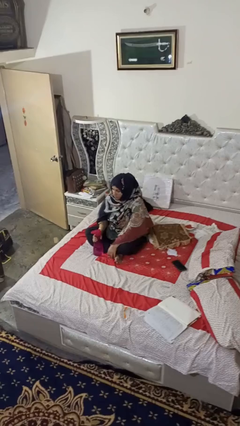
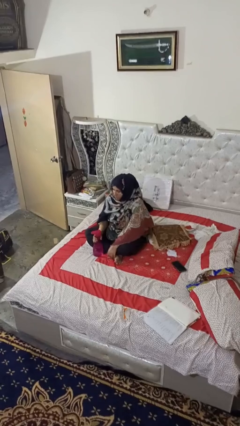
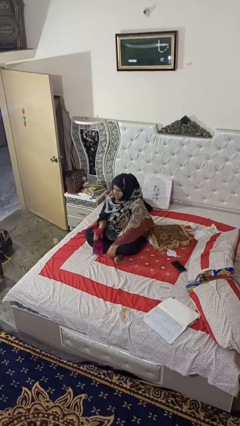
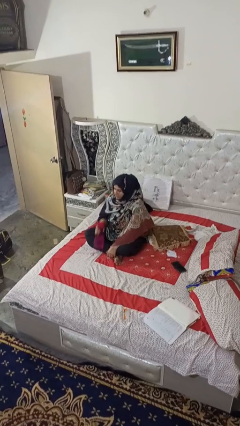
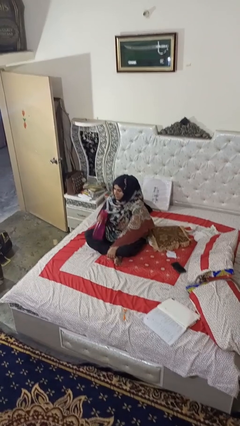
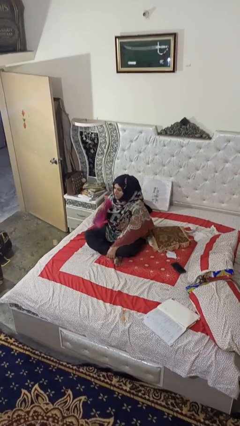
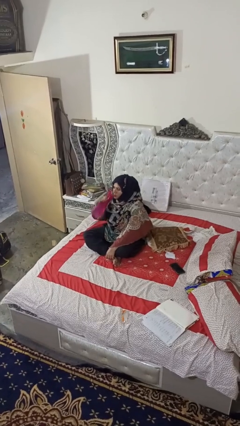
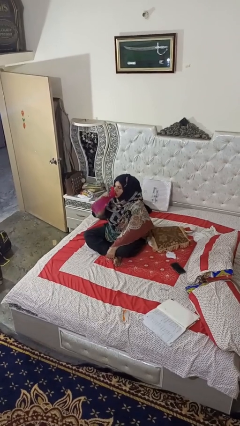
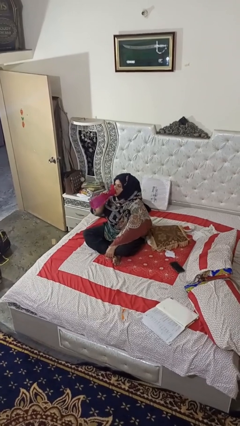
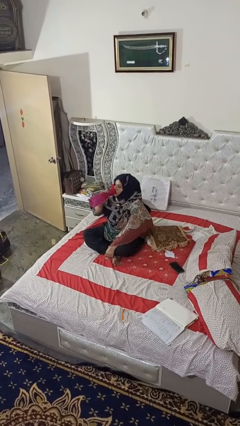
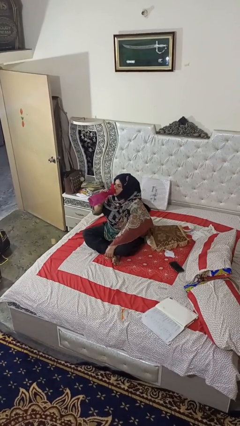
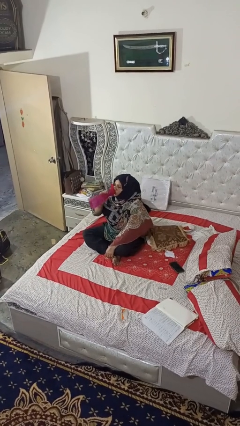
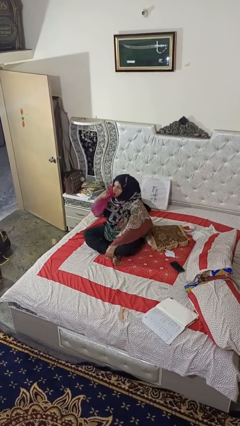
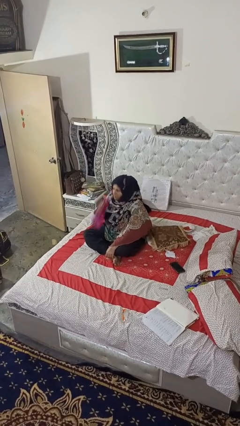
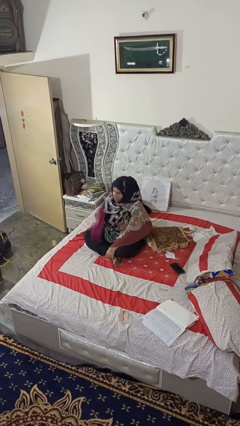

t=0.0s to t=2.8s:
person drinks from bottle

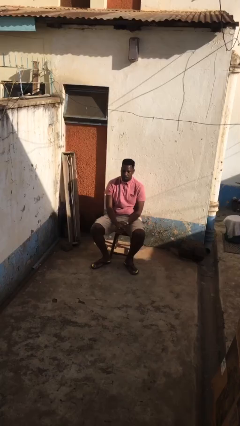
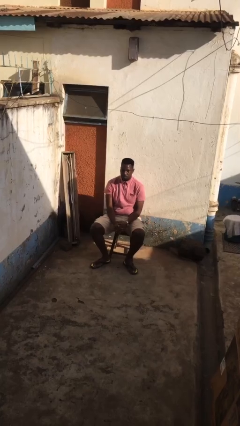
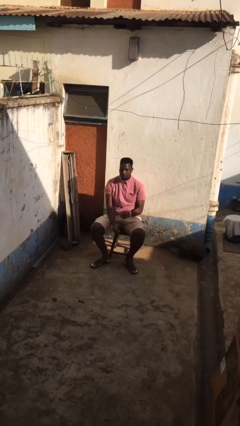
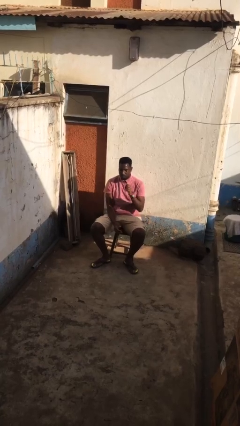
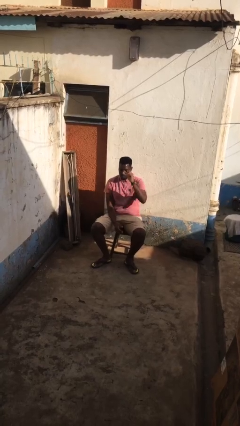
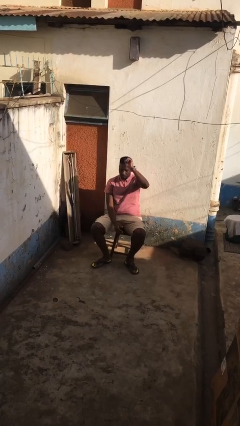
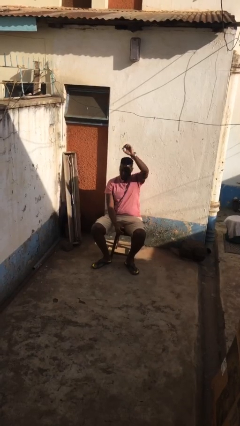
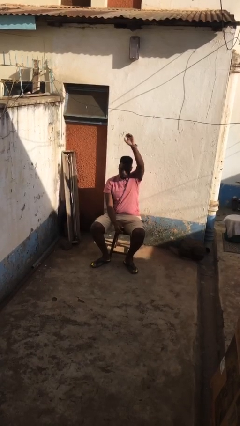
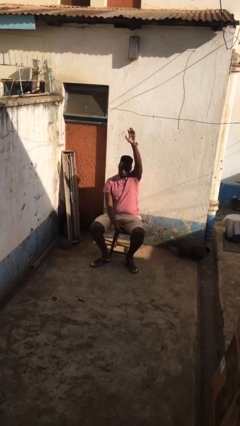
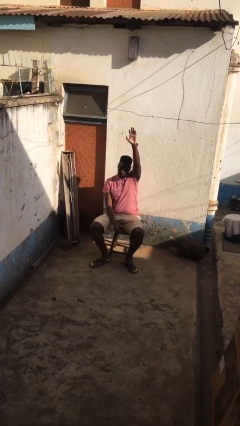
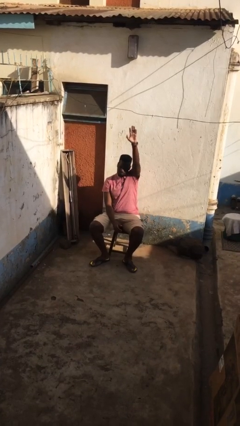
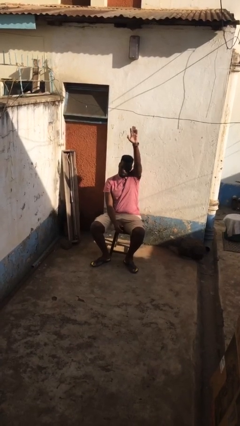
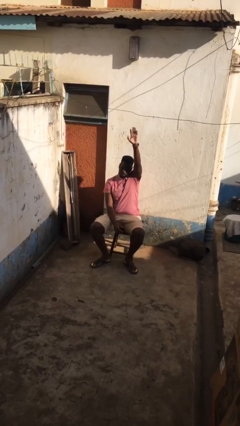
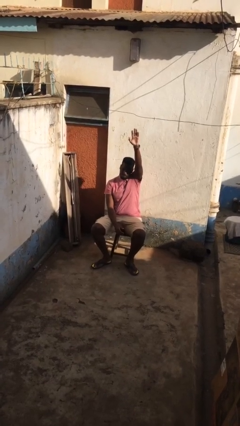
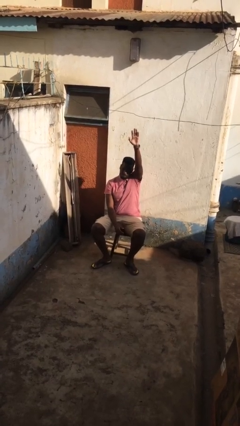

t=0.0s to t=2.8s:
person gestures raise hand

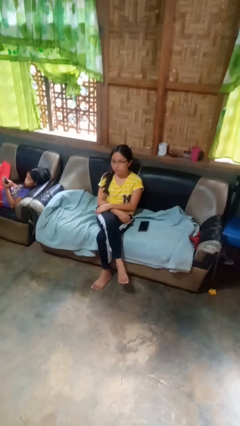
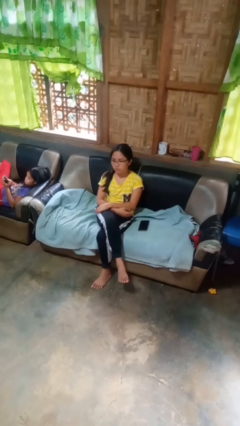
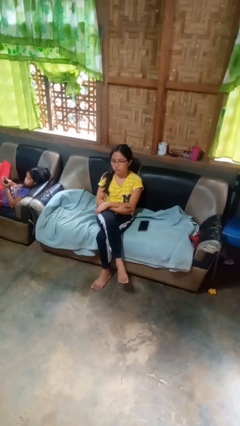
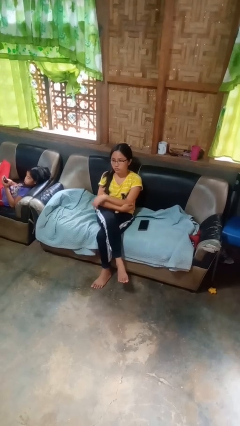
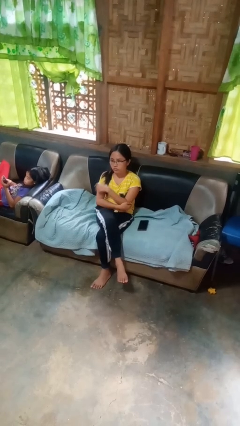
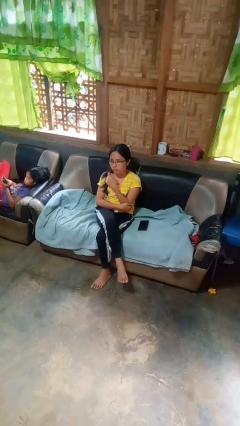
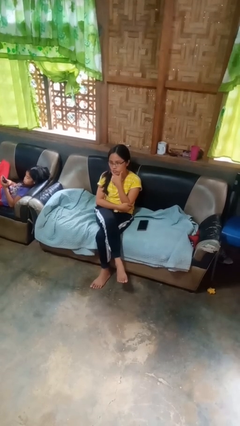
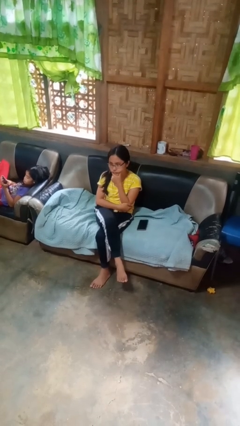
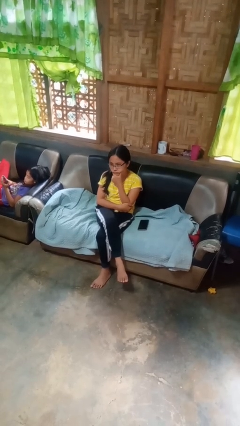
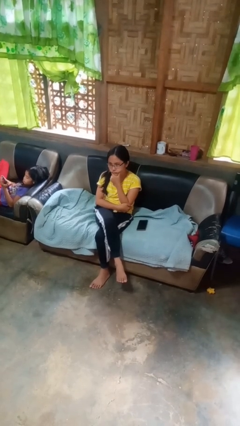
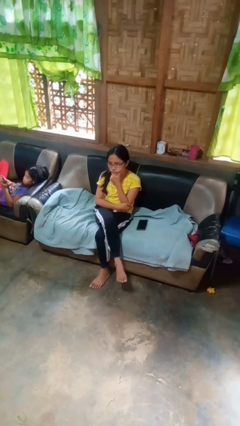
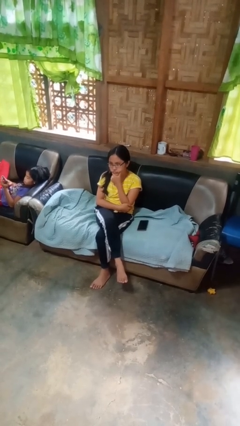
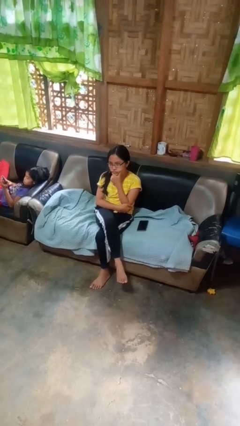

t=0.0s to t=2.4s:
person strokes chin

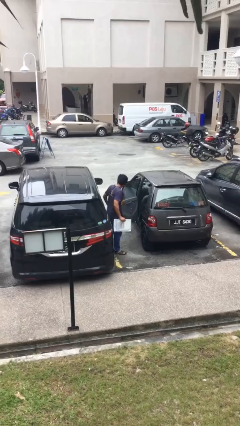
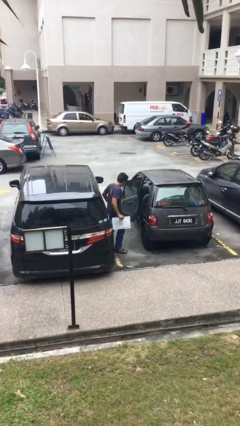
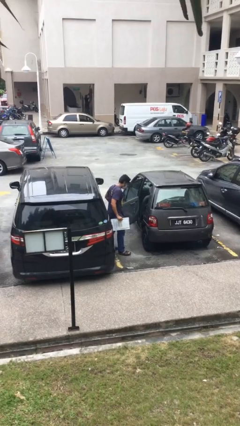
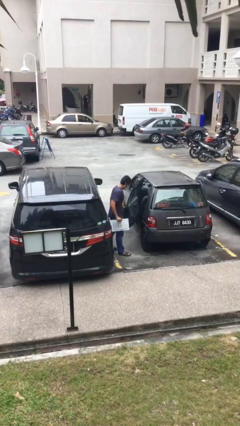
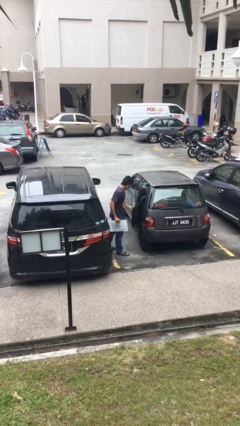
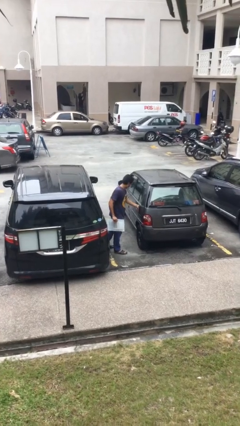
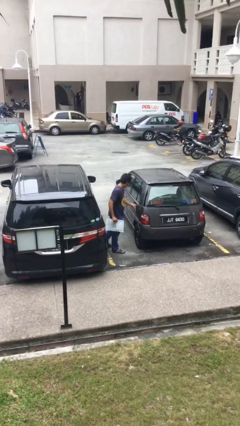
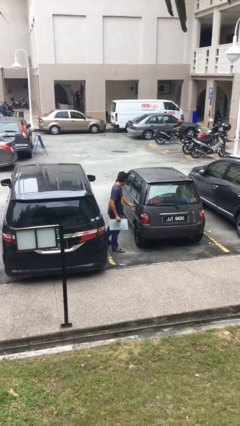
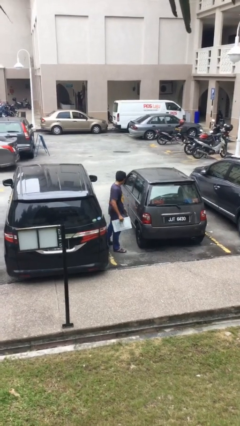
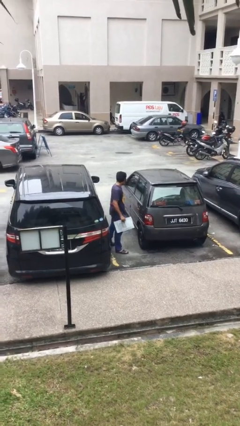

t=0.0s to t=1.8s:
person closes car door

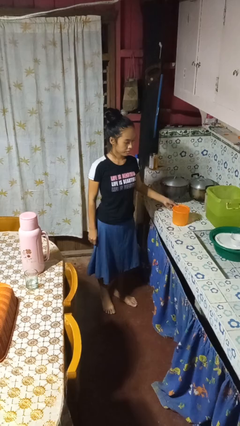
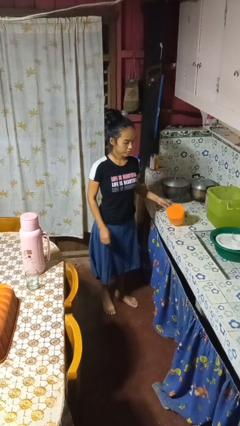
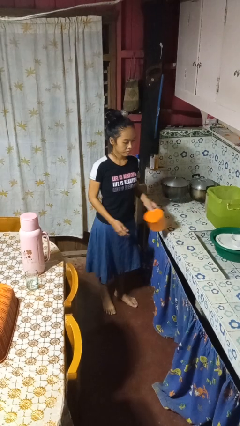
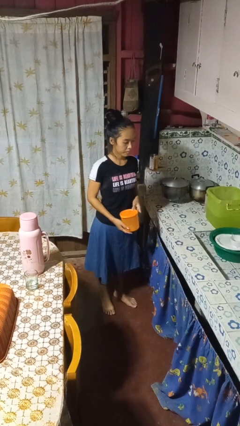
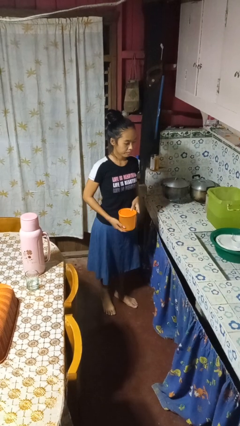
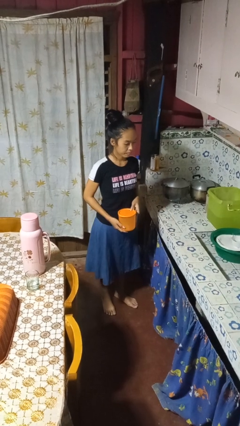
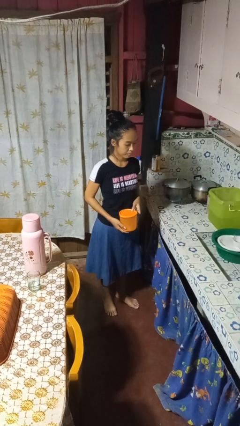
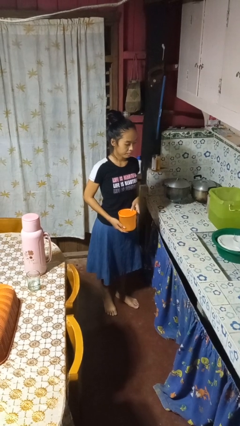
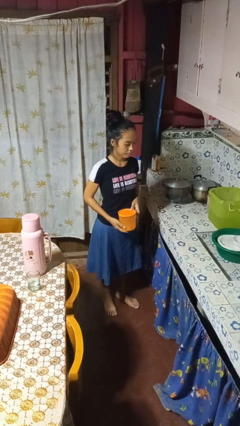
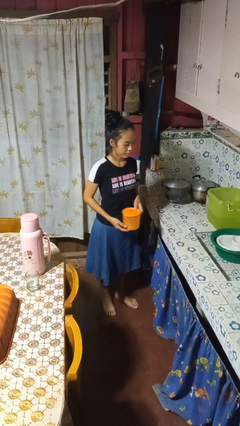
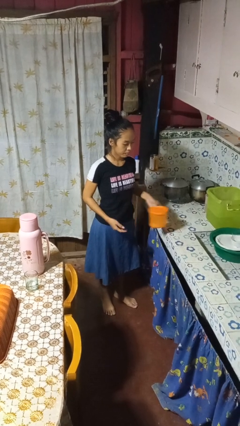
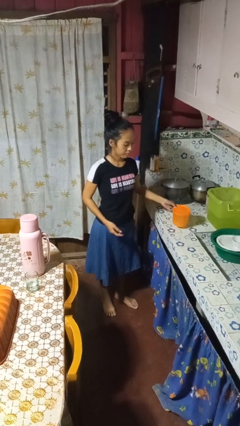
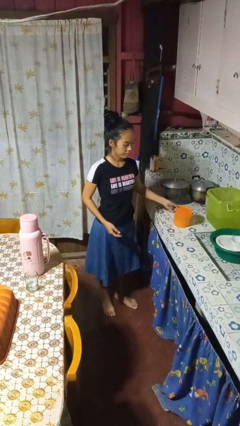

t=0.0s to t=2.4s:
person picks up object from countertop

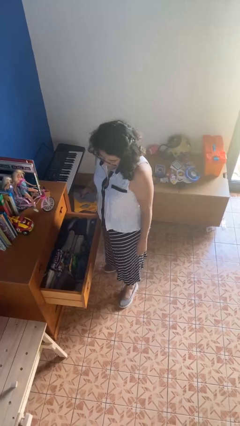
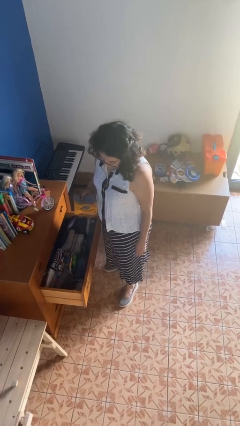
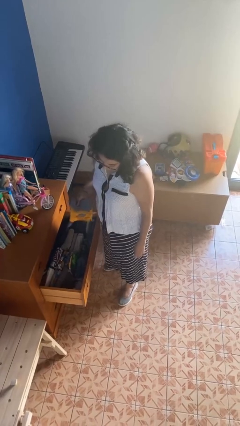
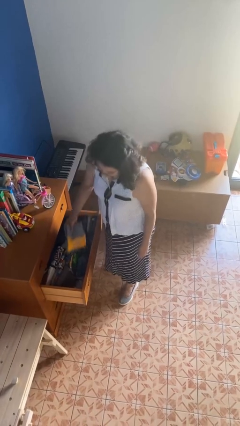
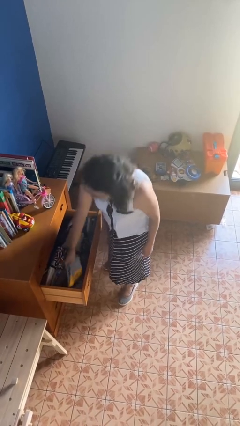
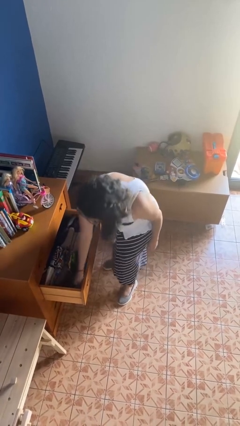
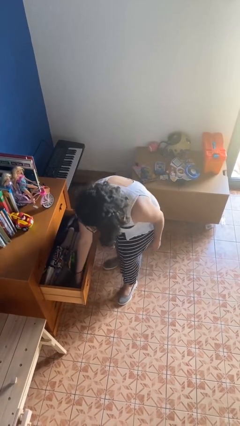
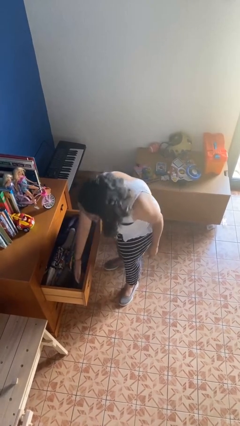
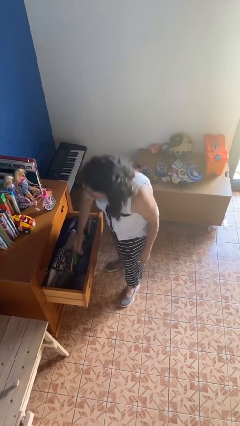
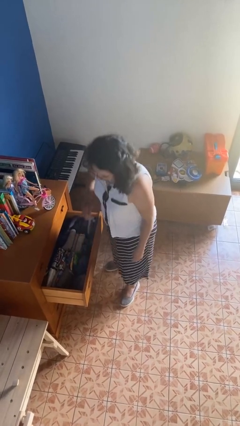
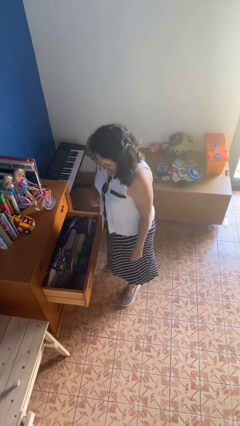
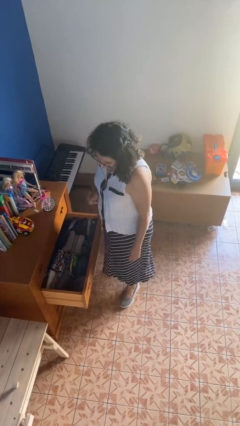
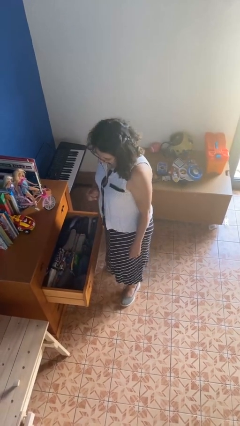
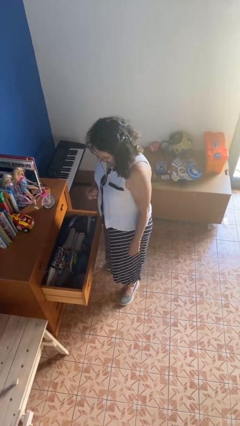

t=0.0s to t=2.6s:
person puts clothes into dresser

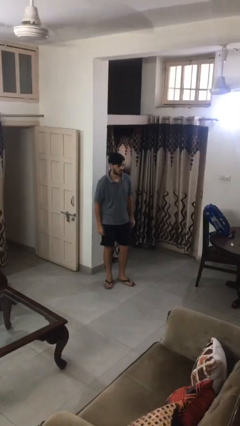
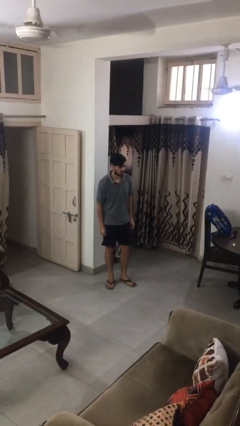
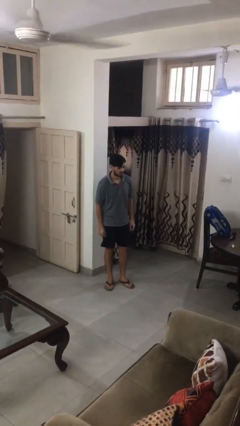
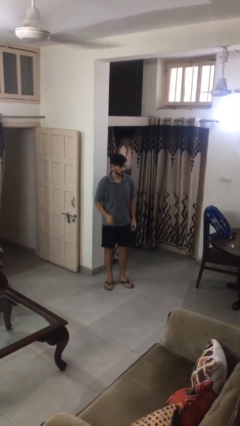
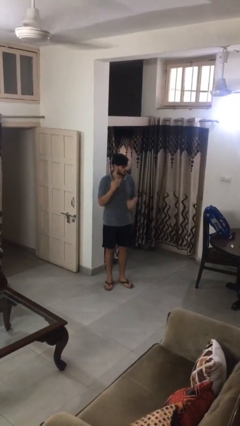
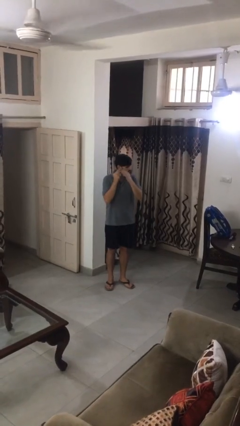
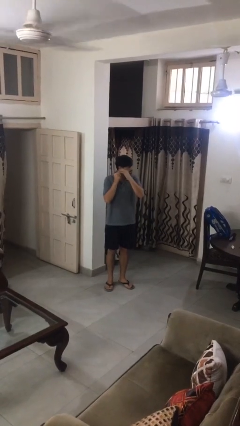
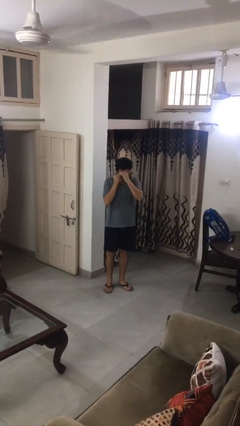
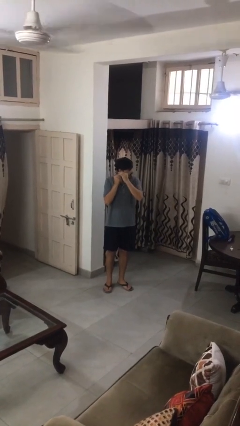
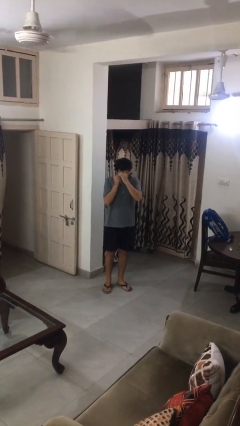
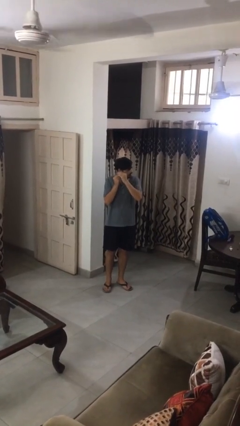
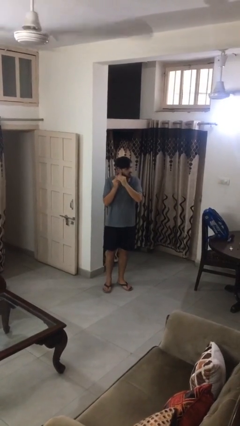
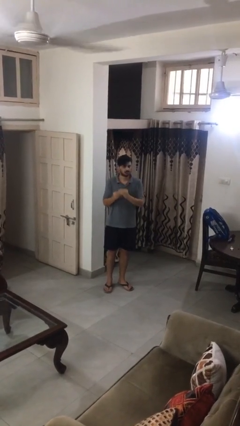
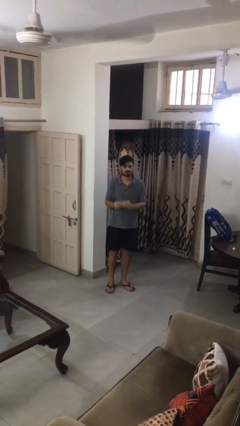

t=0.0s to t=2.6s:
person takes off earrings
